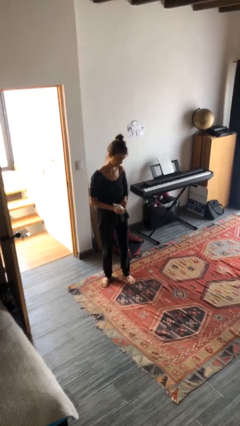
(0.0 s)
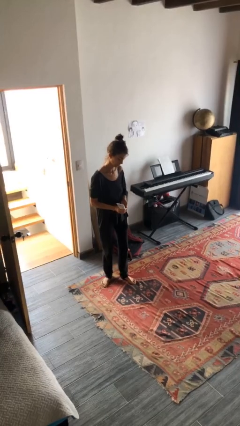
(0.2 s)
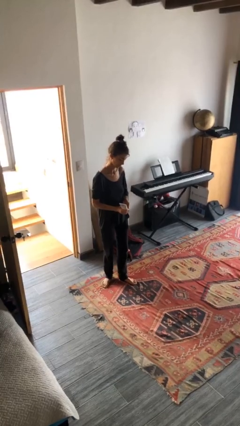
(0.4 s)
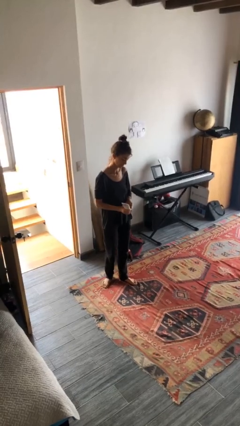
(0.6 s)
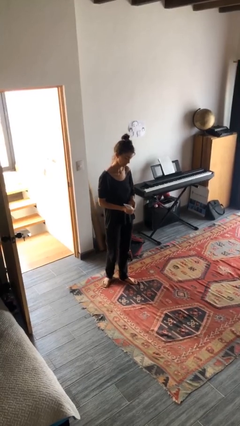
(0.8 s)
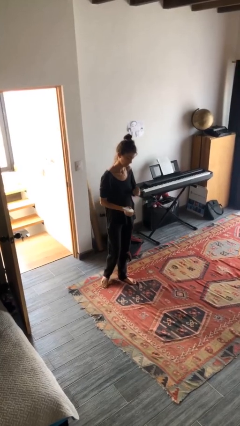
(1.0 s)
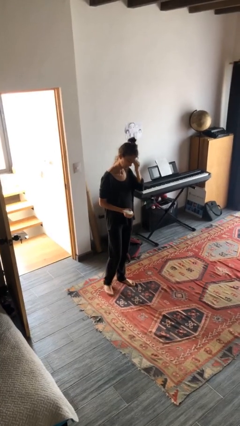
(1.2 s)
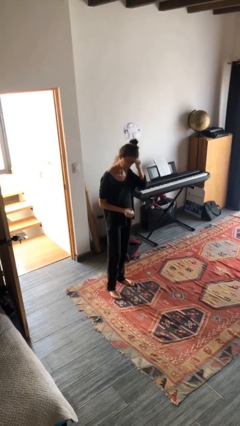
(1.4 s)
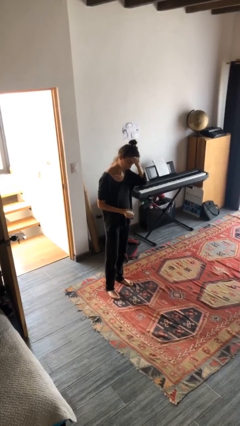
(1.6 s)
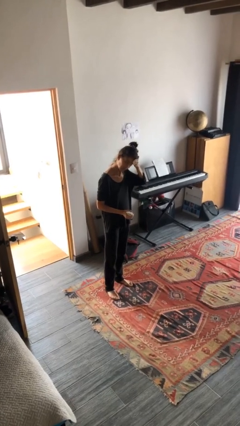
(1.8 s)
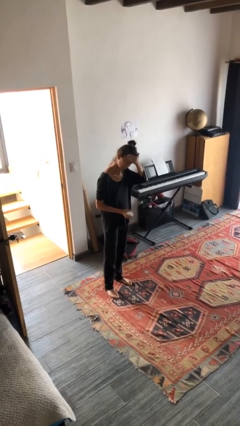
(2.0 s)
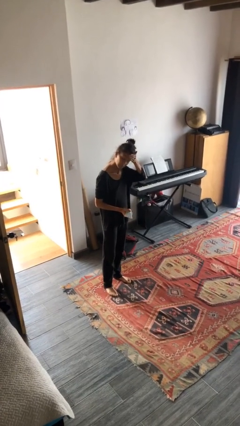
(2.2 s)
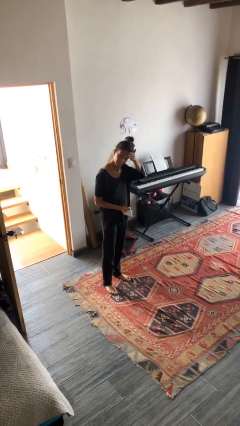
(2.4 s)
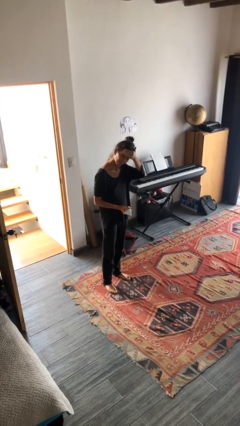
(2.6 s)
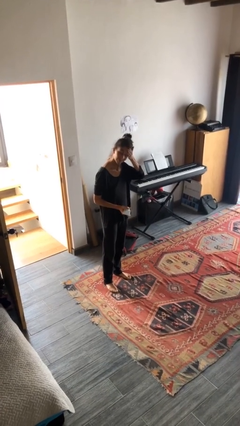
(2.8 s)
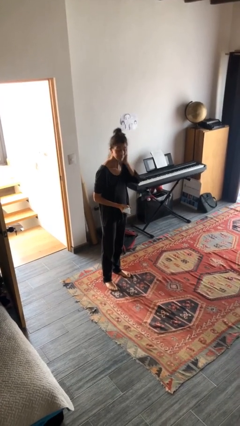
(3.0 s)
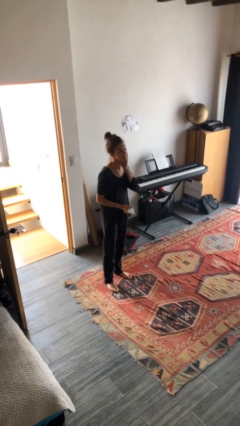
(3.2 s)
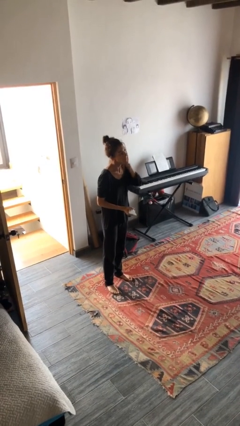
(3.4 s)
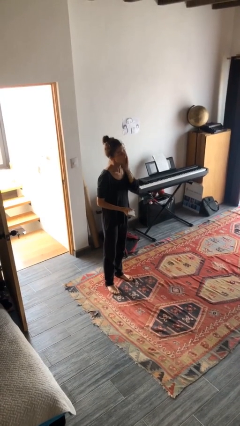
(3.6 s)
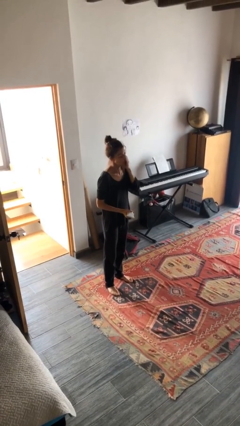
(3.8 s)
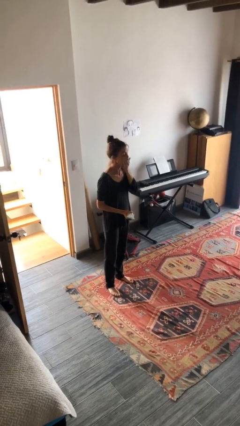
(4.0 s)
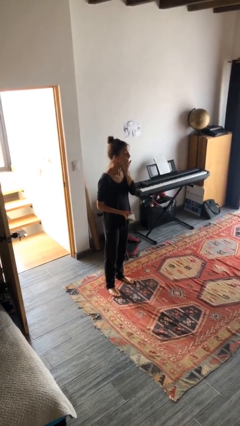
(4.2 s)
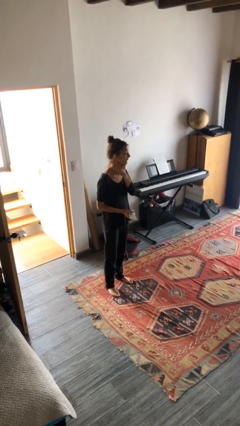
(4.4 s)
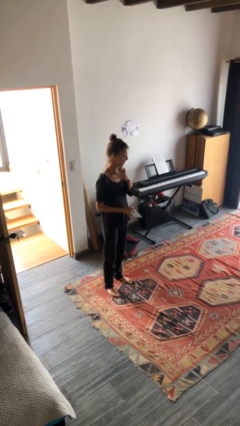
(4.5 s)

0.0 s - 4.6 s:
person applies sunscreen

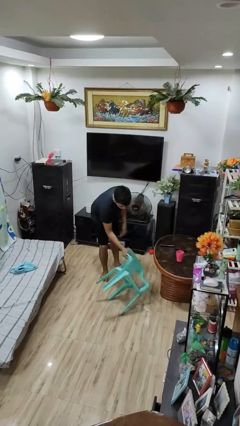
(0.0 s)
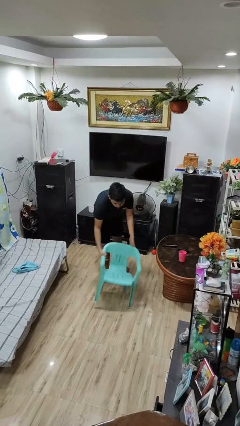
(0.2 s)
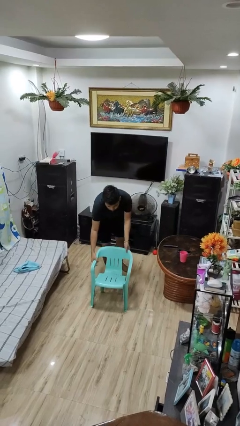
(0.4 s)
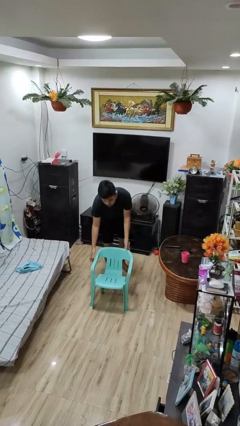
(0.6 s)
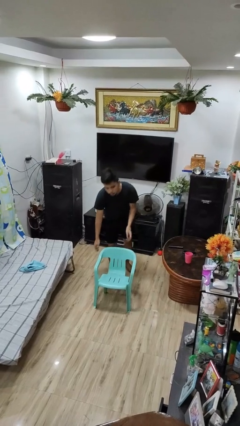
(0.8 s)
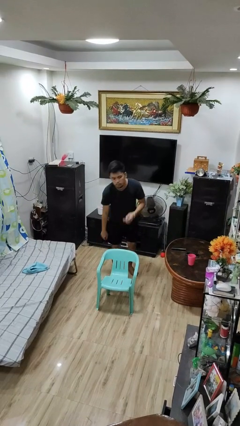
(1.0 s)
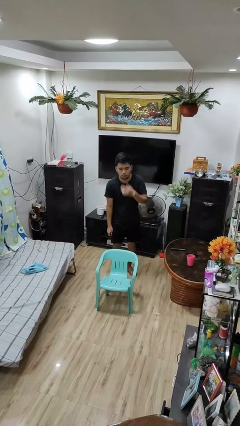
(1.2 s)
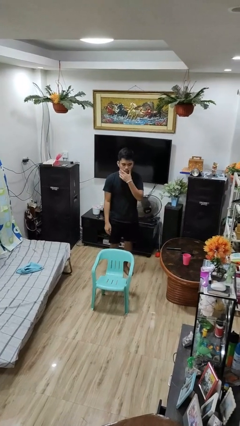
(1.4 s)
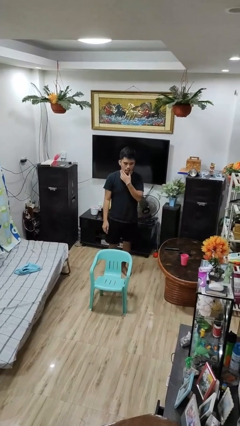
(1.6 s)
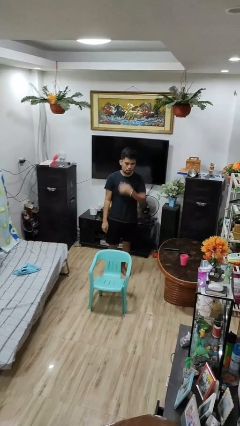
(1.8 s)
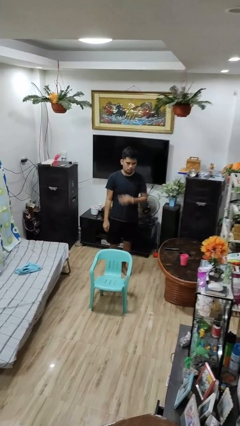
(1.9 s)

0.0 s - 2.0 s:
person sets upright furniture

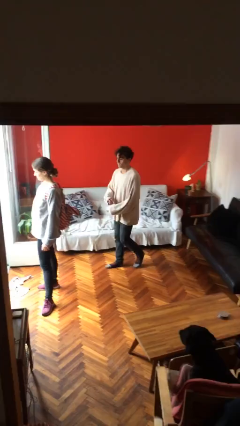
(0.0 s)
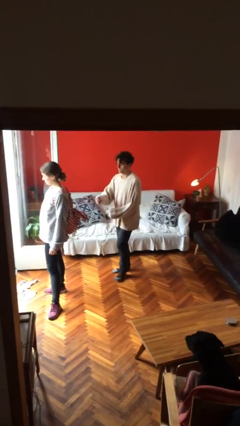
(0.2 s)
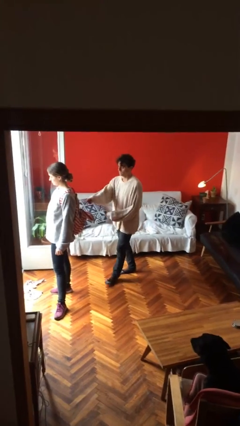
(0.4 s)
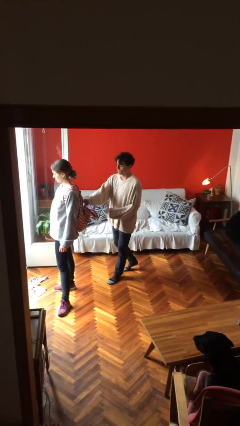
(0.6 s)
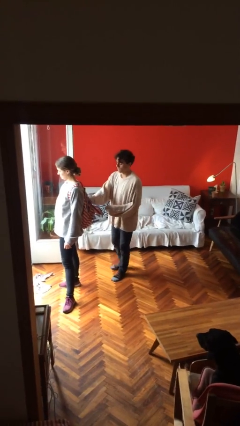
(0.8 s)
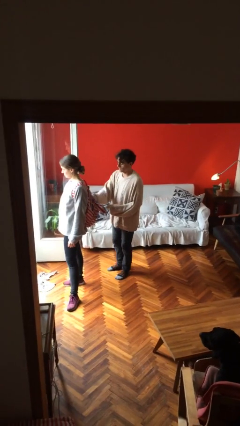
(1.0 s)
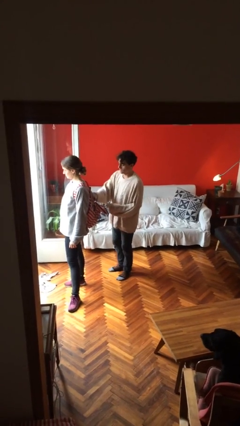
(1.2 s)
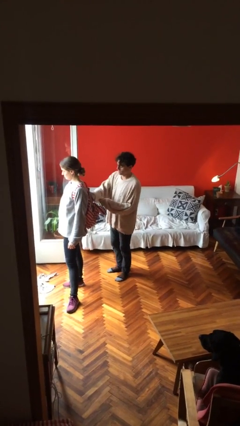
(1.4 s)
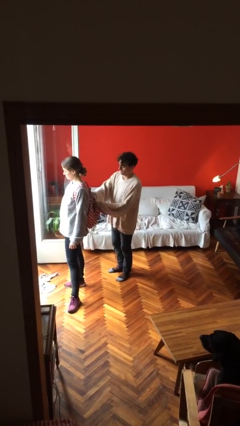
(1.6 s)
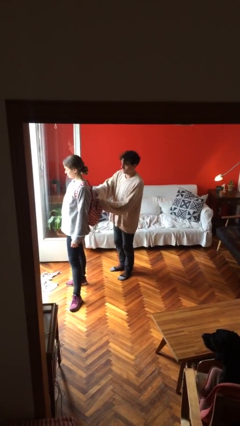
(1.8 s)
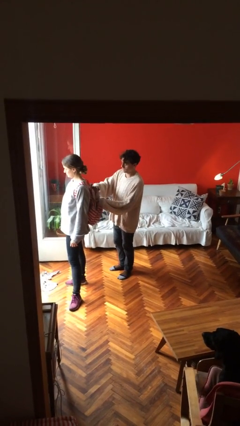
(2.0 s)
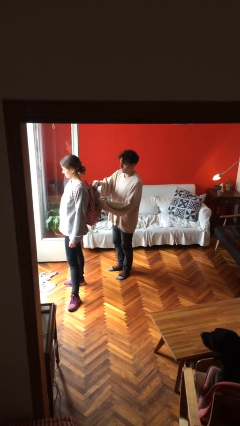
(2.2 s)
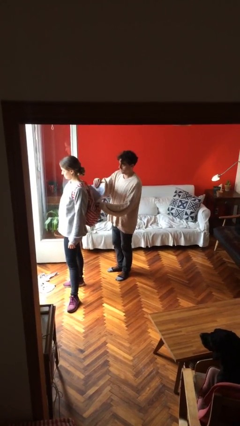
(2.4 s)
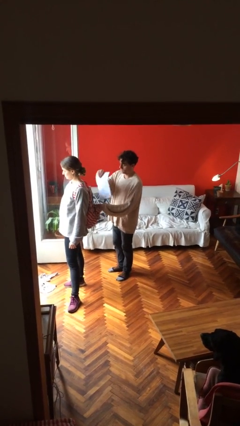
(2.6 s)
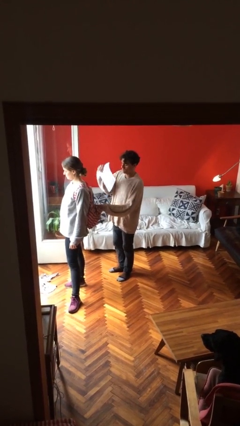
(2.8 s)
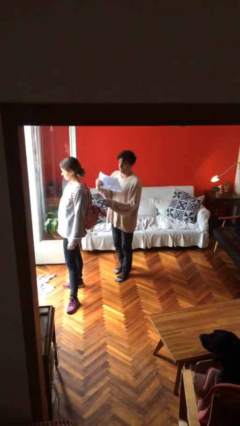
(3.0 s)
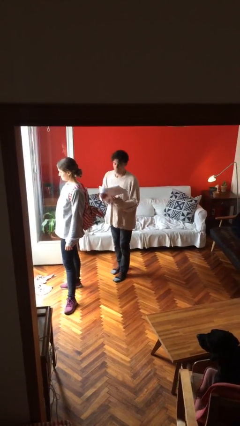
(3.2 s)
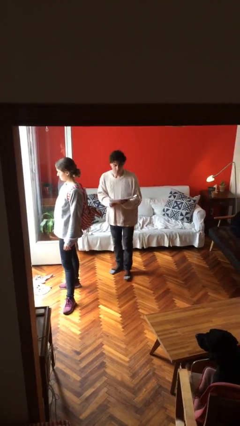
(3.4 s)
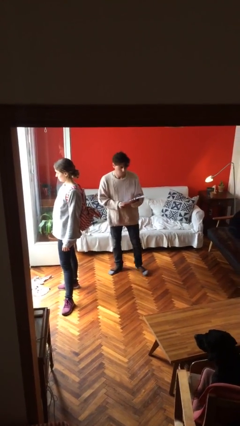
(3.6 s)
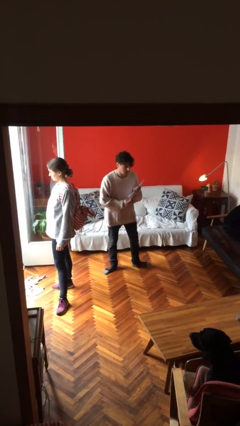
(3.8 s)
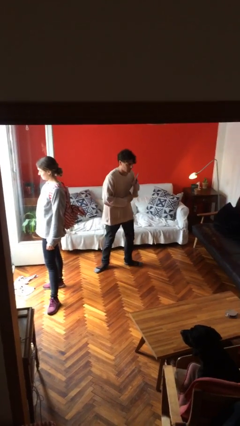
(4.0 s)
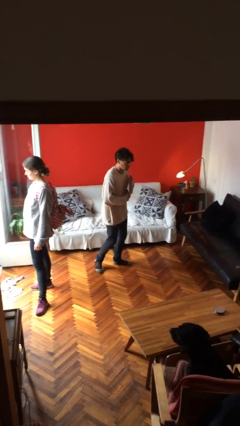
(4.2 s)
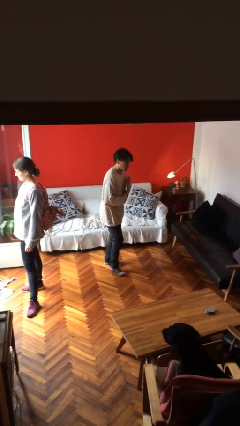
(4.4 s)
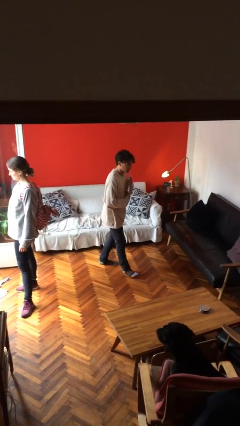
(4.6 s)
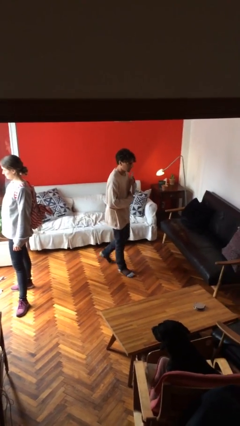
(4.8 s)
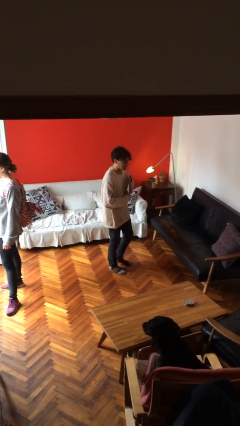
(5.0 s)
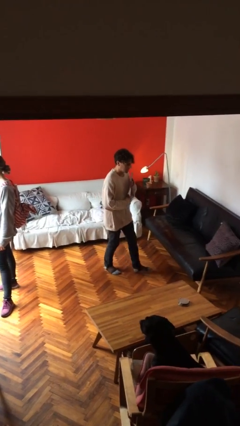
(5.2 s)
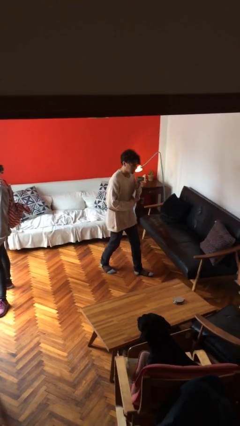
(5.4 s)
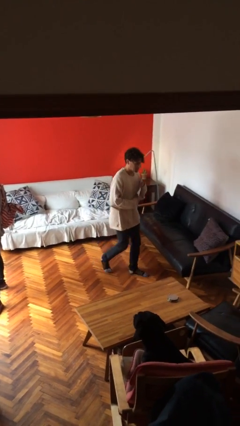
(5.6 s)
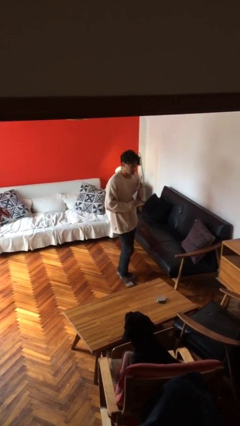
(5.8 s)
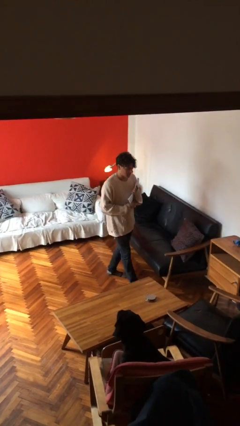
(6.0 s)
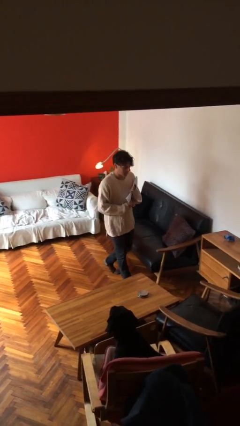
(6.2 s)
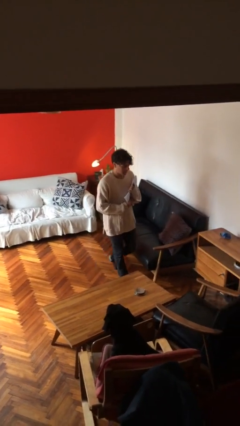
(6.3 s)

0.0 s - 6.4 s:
person steals object from person

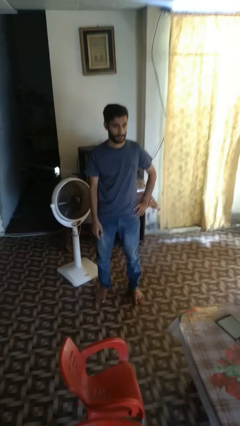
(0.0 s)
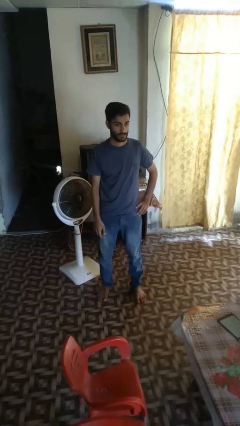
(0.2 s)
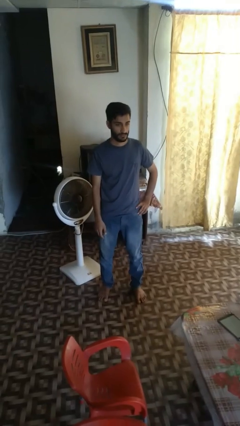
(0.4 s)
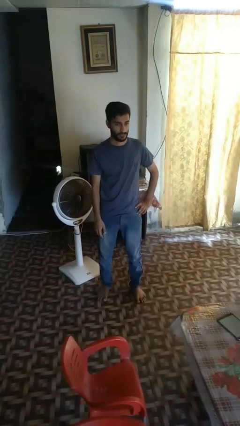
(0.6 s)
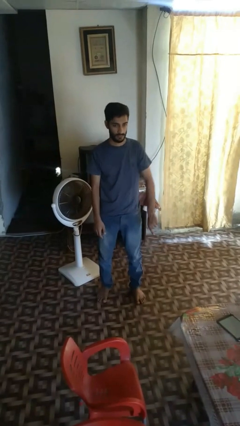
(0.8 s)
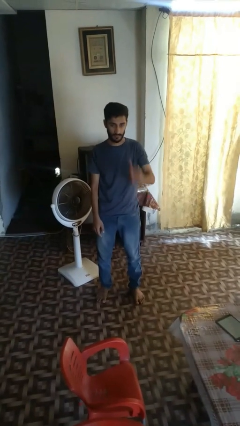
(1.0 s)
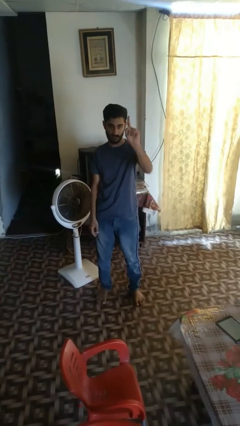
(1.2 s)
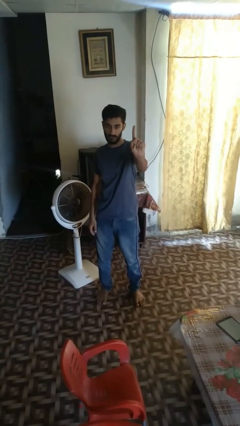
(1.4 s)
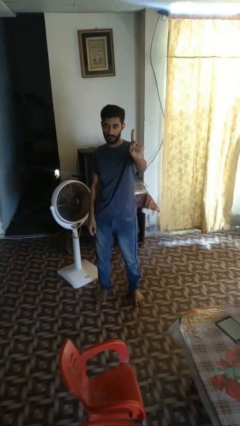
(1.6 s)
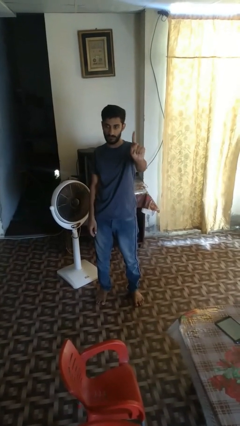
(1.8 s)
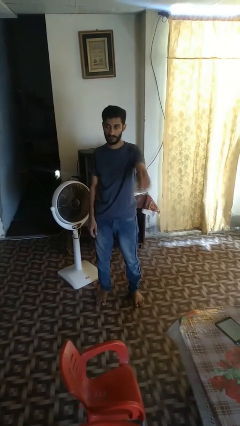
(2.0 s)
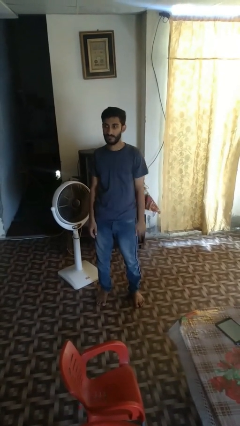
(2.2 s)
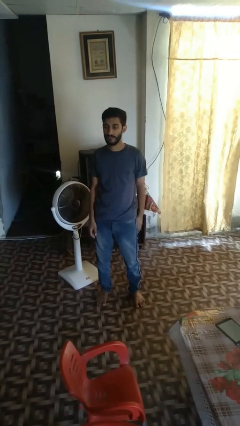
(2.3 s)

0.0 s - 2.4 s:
person gestures number one

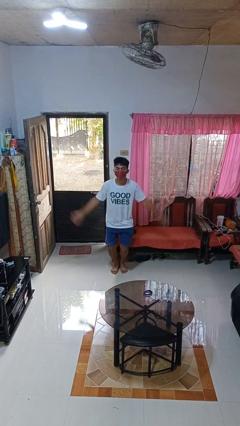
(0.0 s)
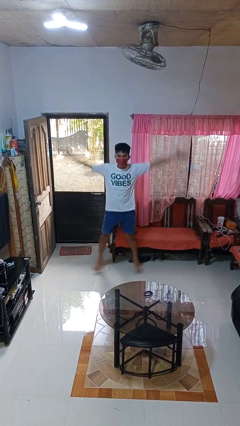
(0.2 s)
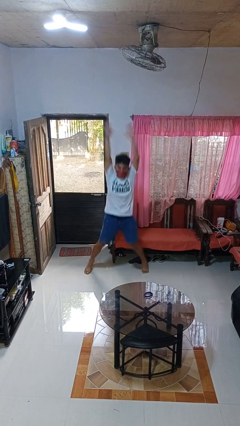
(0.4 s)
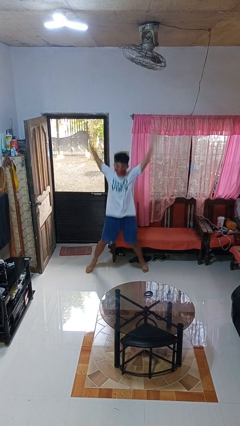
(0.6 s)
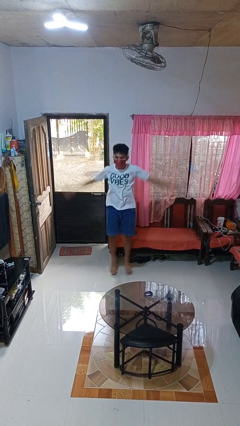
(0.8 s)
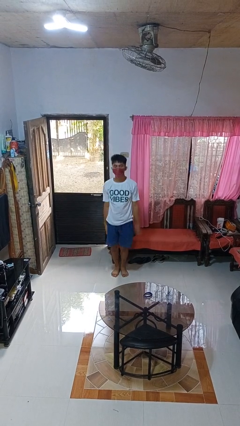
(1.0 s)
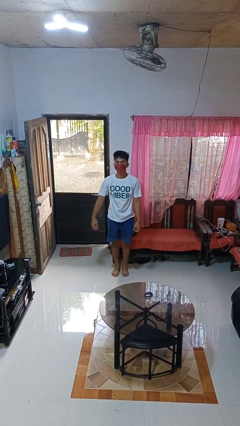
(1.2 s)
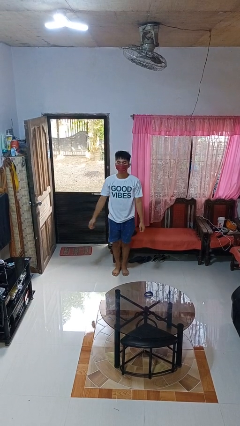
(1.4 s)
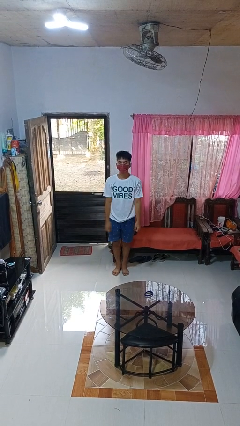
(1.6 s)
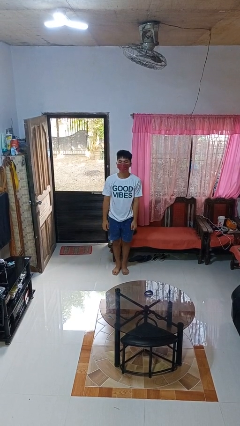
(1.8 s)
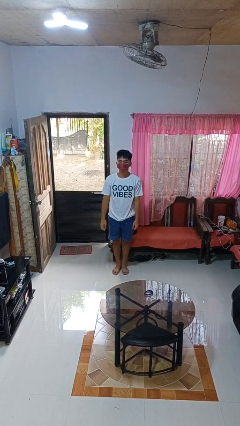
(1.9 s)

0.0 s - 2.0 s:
person exercises with jumping jacks

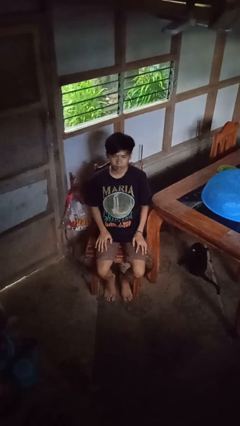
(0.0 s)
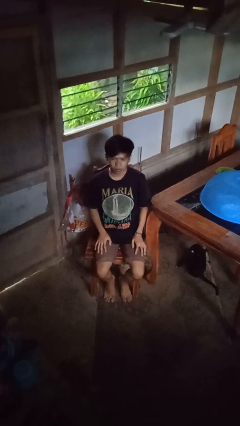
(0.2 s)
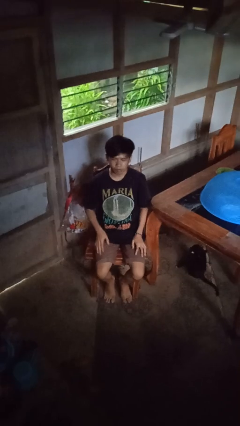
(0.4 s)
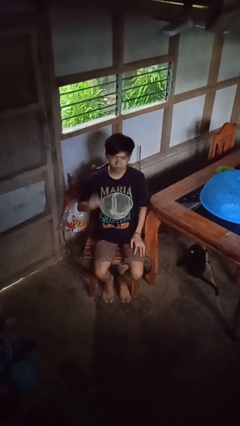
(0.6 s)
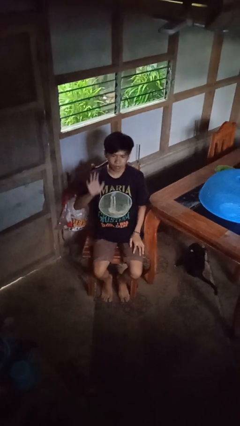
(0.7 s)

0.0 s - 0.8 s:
person gestures stop
